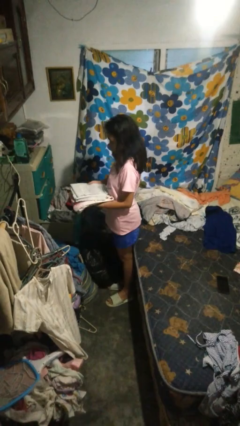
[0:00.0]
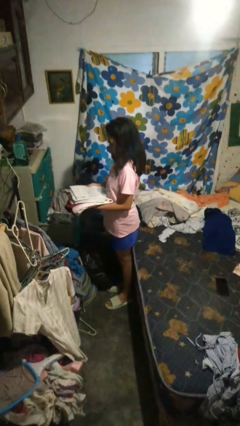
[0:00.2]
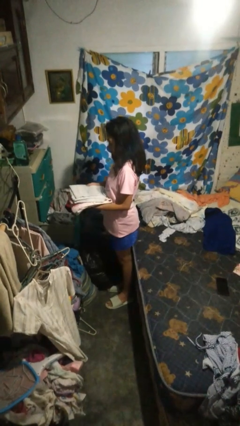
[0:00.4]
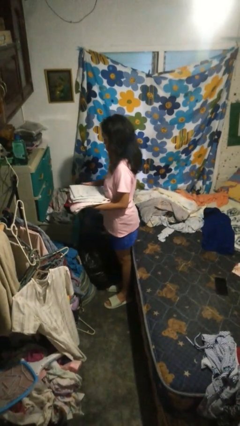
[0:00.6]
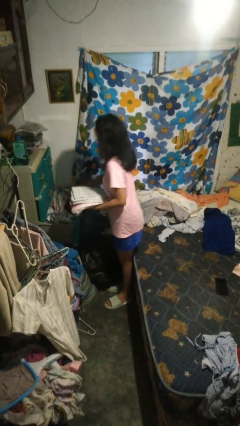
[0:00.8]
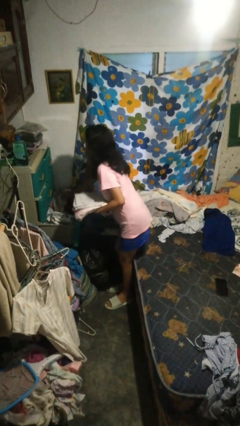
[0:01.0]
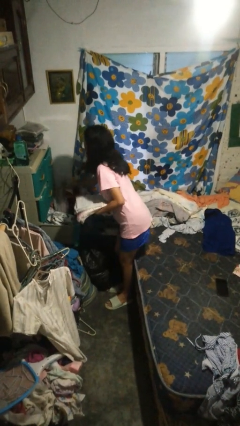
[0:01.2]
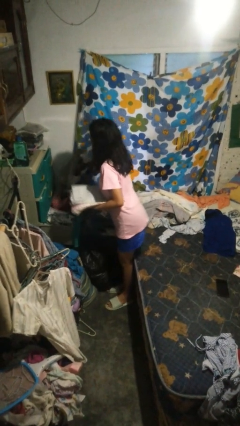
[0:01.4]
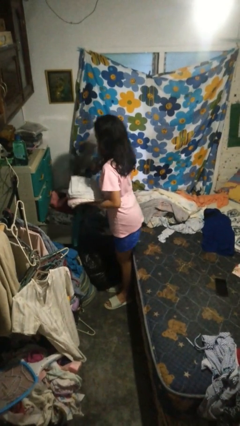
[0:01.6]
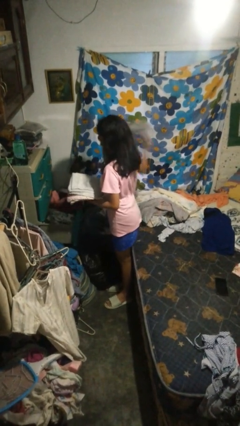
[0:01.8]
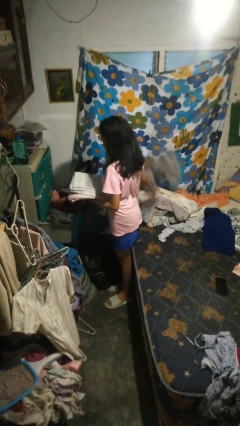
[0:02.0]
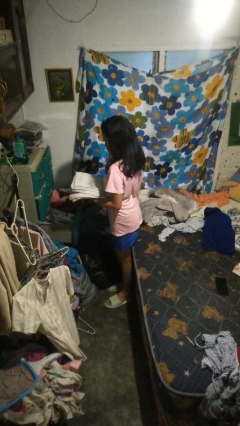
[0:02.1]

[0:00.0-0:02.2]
person takes clothes from dresser

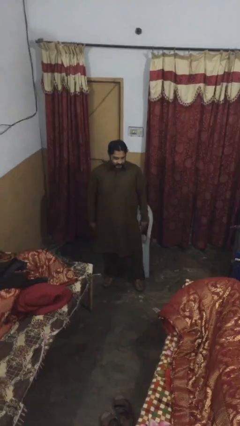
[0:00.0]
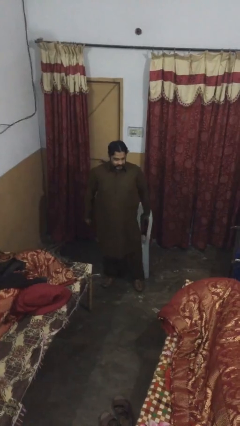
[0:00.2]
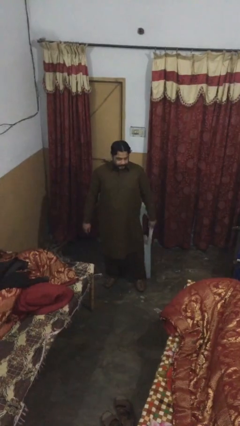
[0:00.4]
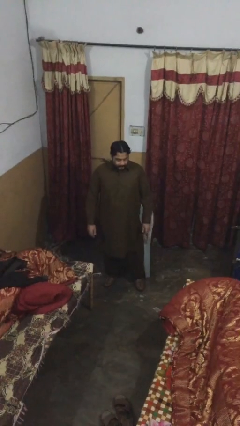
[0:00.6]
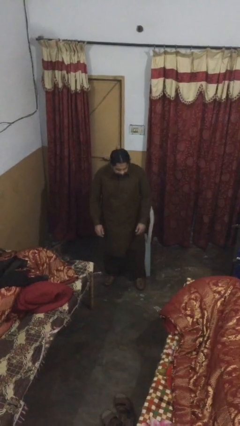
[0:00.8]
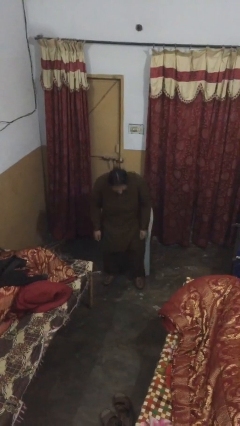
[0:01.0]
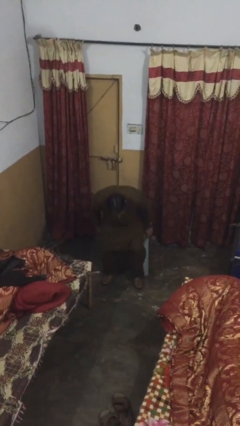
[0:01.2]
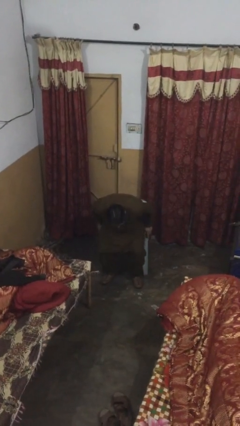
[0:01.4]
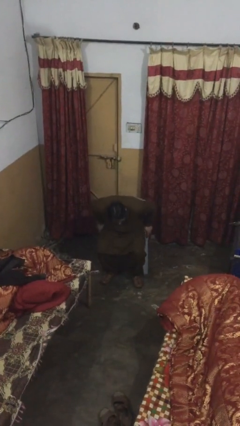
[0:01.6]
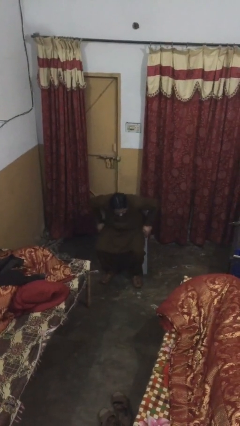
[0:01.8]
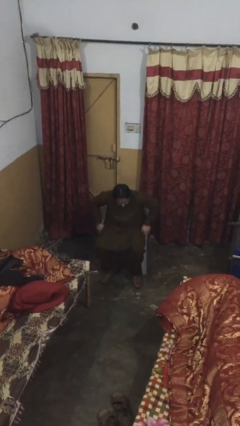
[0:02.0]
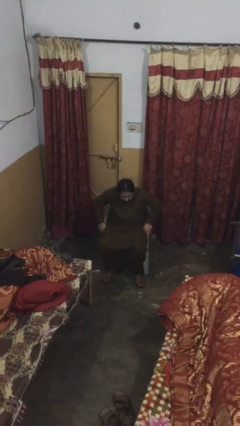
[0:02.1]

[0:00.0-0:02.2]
person sits down

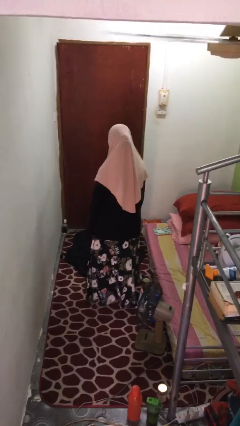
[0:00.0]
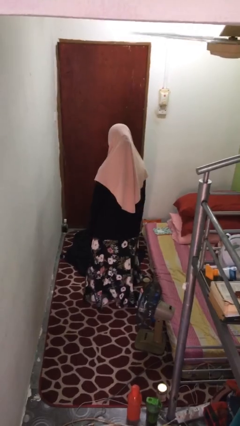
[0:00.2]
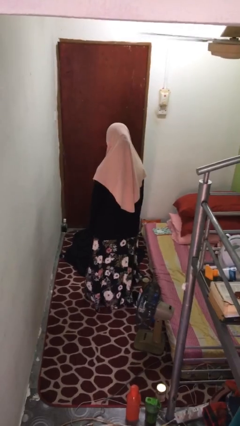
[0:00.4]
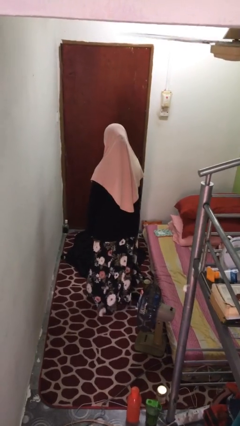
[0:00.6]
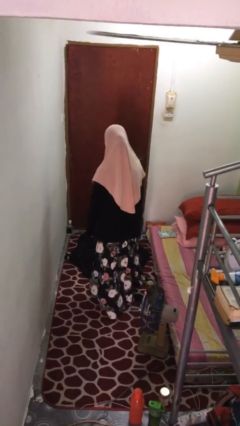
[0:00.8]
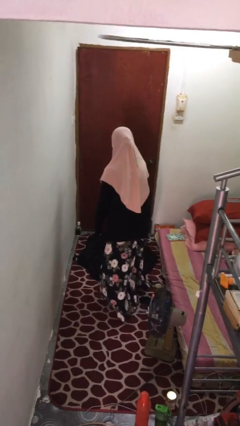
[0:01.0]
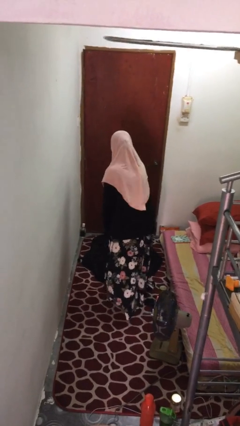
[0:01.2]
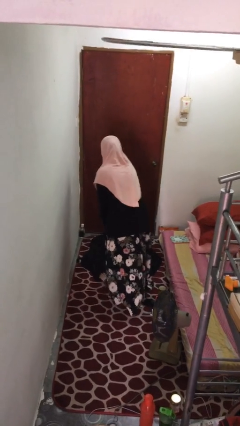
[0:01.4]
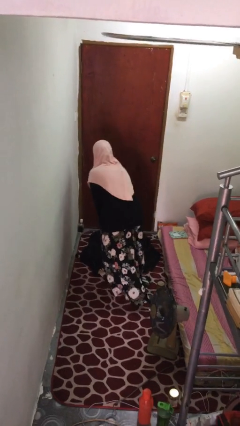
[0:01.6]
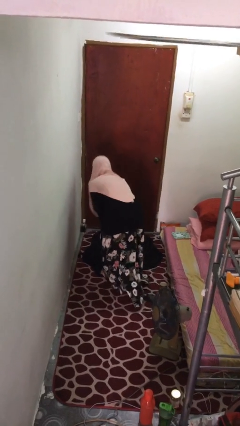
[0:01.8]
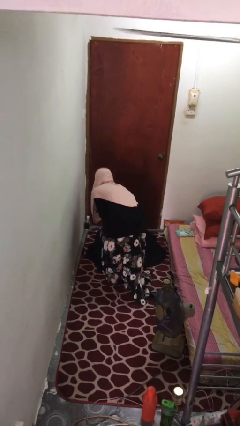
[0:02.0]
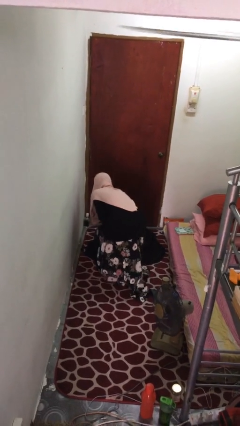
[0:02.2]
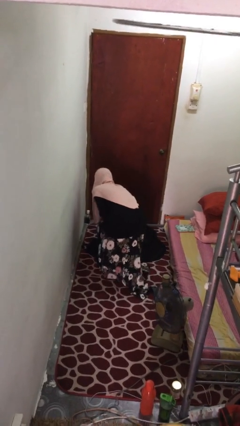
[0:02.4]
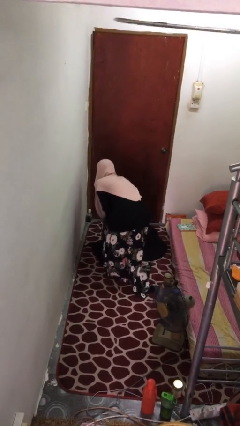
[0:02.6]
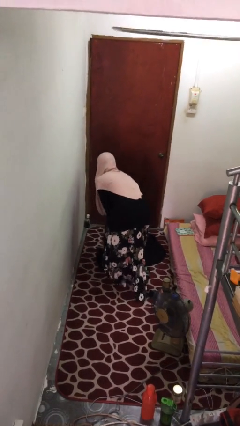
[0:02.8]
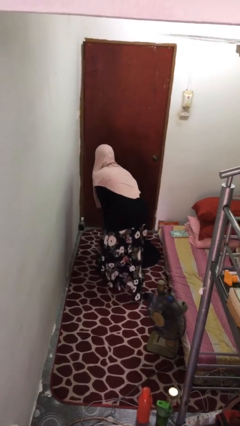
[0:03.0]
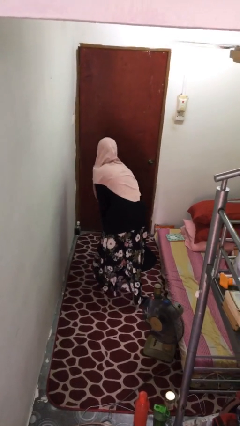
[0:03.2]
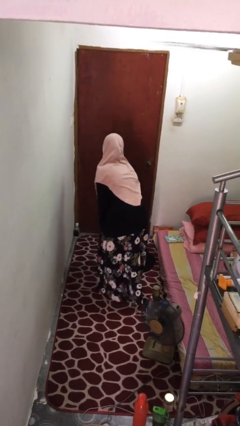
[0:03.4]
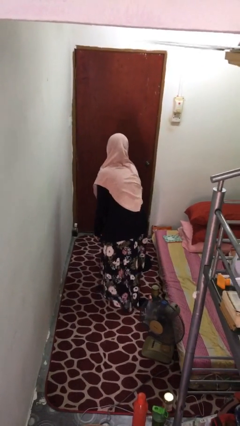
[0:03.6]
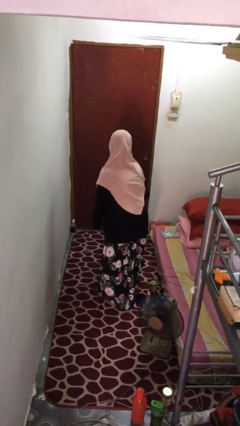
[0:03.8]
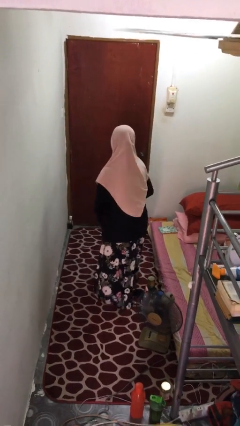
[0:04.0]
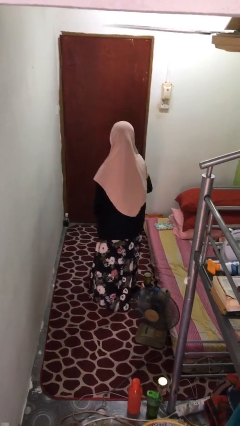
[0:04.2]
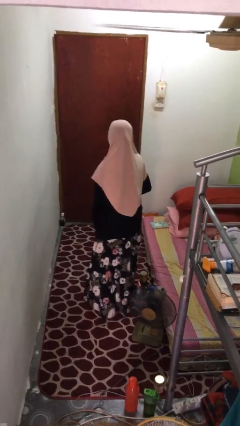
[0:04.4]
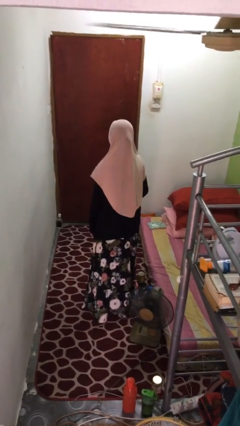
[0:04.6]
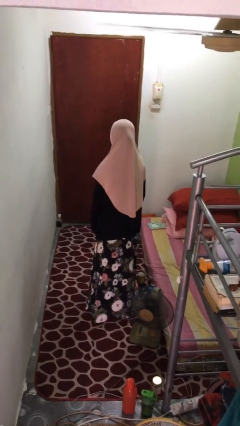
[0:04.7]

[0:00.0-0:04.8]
person picks up object from floor

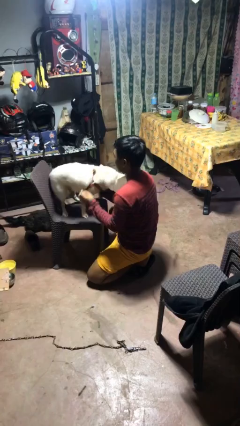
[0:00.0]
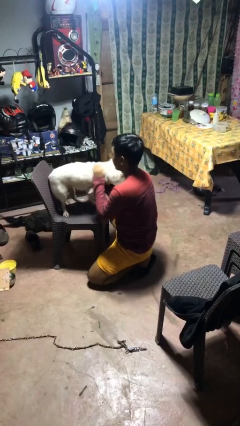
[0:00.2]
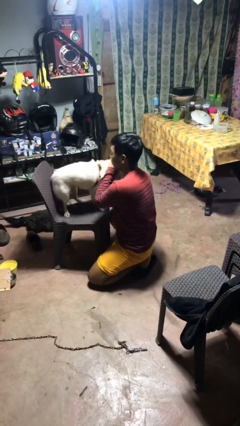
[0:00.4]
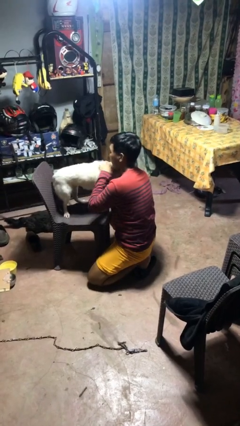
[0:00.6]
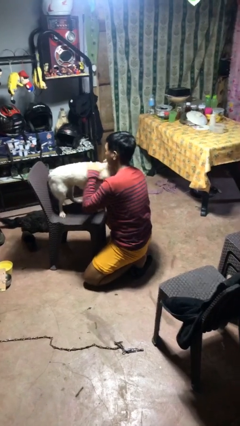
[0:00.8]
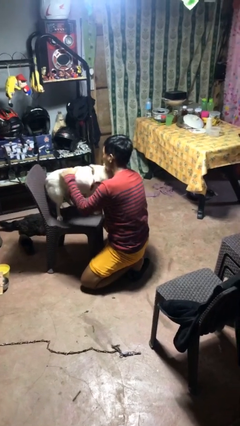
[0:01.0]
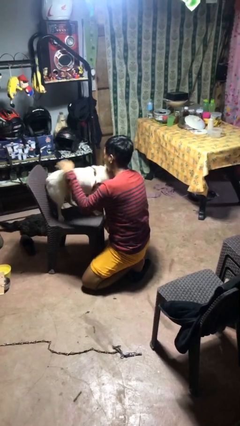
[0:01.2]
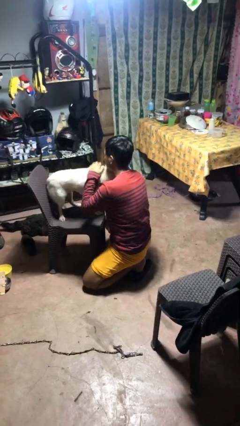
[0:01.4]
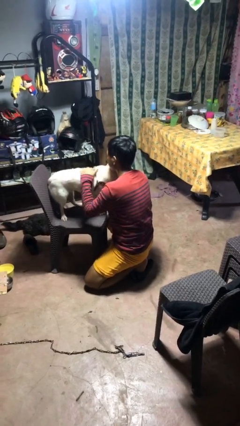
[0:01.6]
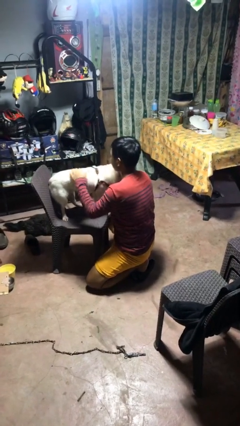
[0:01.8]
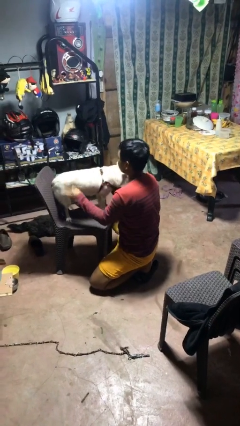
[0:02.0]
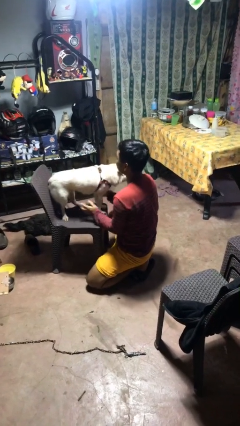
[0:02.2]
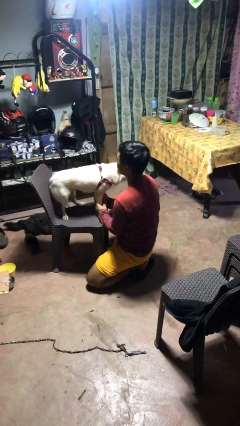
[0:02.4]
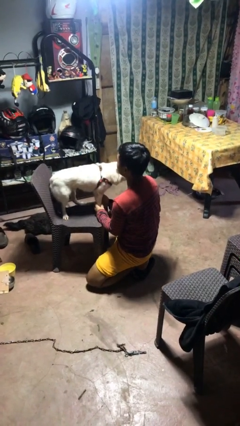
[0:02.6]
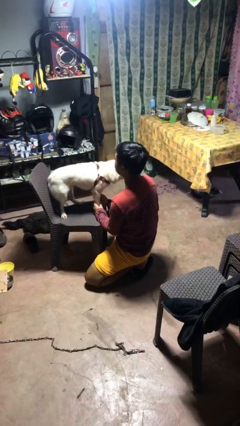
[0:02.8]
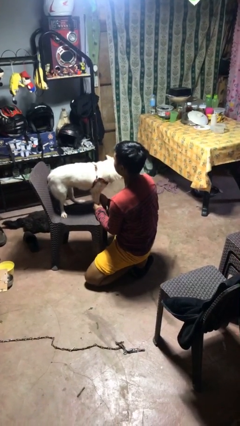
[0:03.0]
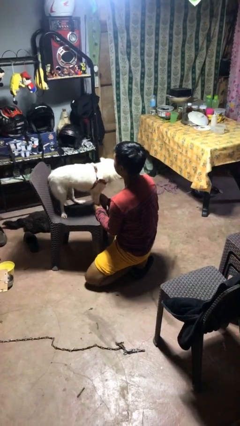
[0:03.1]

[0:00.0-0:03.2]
person hugs dog

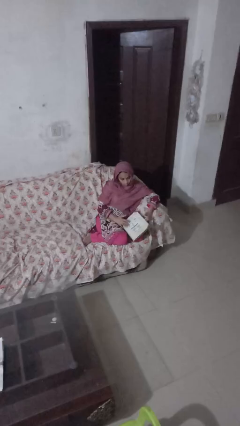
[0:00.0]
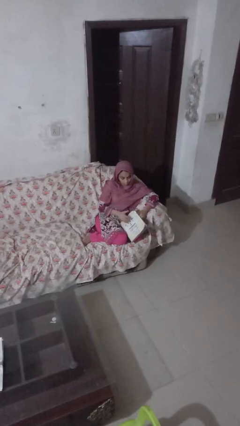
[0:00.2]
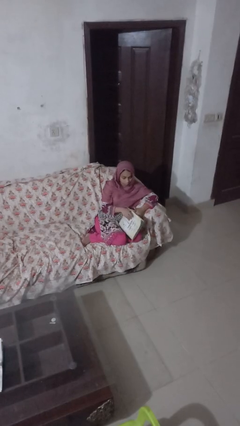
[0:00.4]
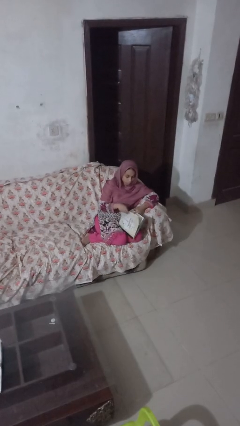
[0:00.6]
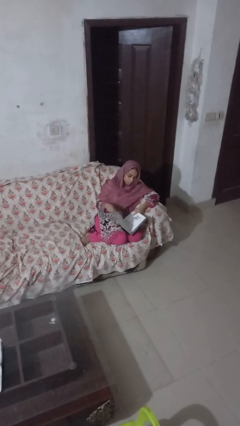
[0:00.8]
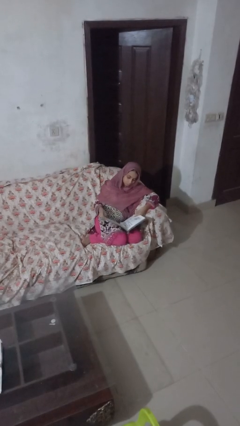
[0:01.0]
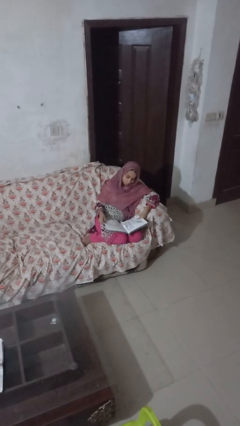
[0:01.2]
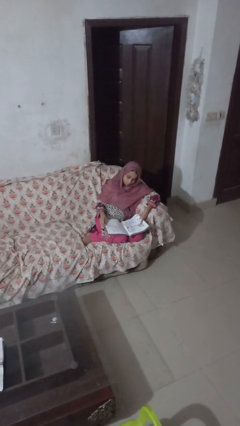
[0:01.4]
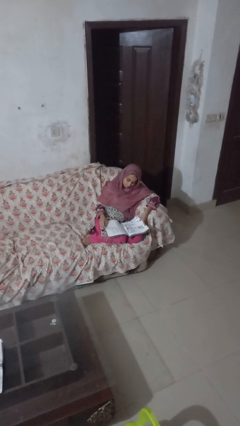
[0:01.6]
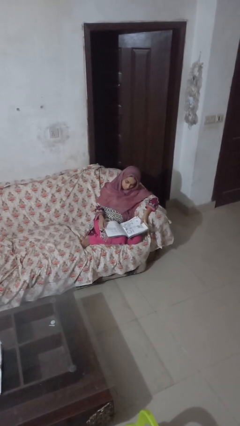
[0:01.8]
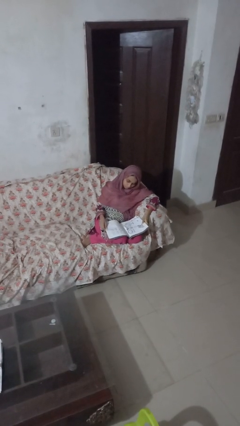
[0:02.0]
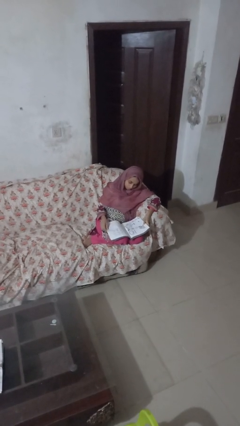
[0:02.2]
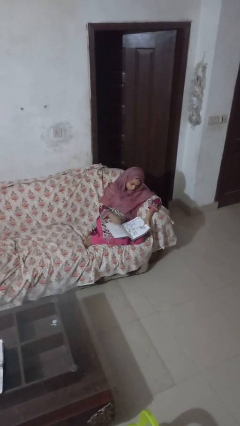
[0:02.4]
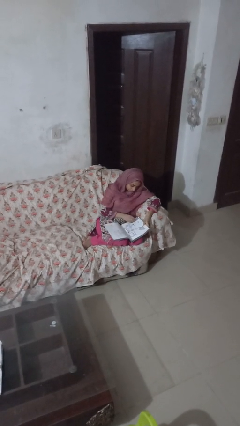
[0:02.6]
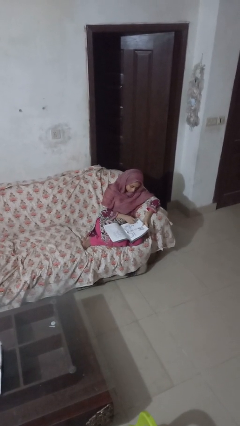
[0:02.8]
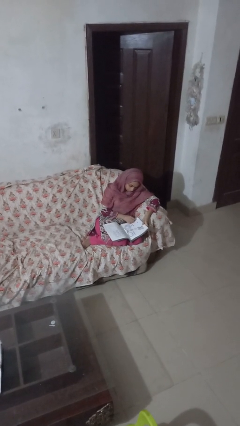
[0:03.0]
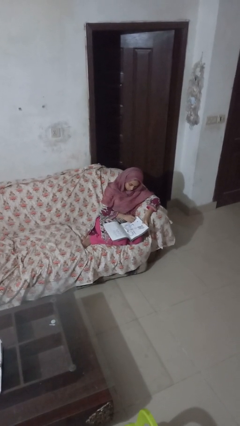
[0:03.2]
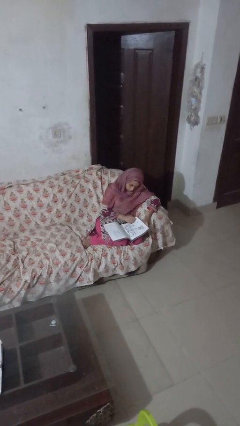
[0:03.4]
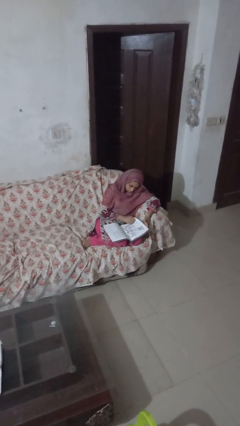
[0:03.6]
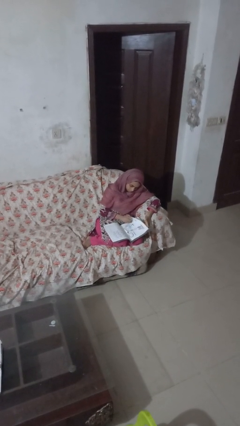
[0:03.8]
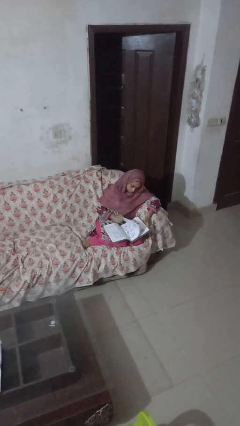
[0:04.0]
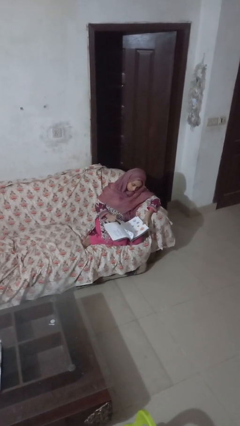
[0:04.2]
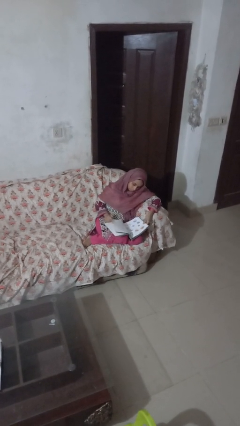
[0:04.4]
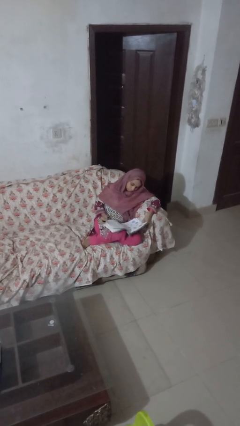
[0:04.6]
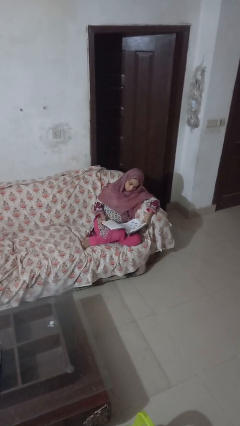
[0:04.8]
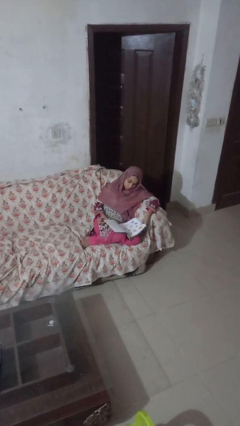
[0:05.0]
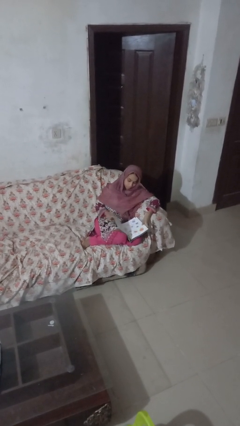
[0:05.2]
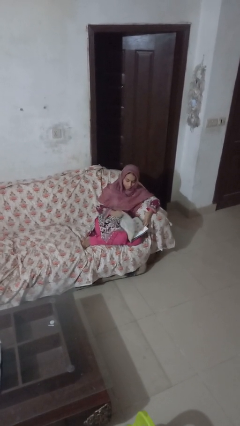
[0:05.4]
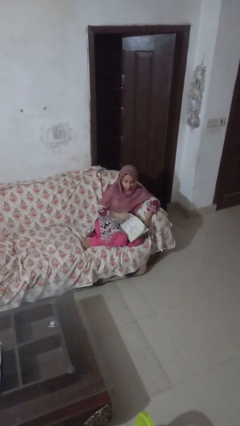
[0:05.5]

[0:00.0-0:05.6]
person reads book
